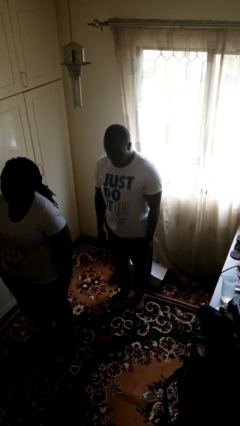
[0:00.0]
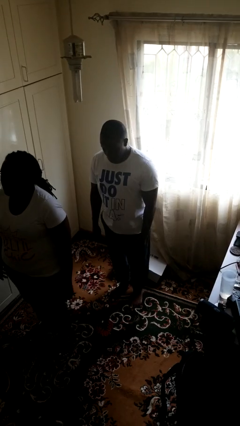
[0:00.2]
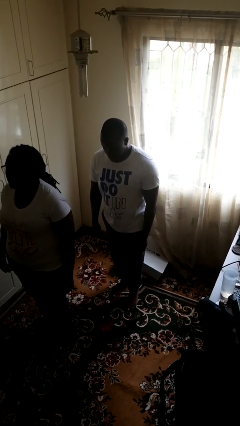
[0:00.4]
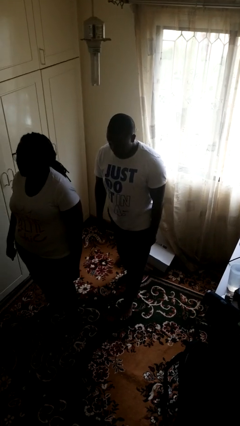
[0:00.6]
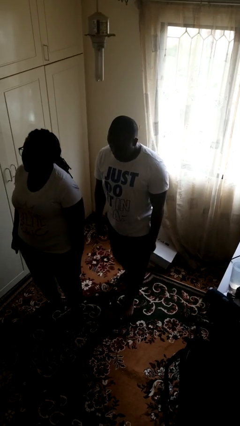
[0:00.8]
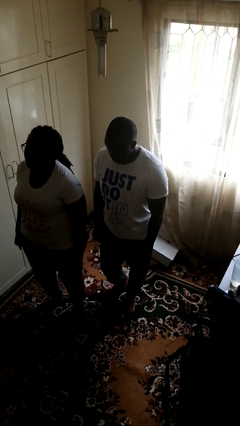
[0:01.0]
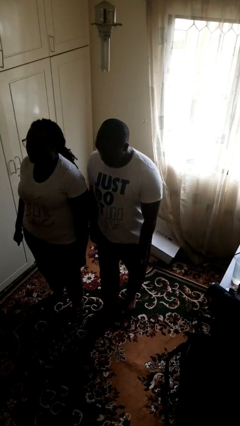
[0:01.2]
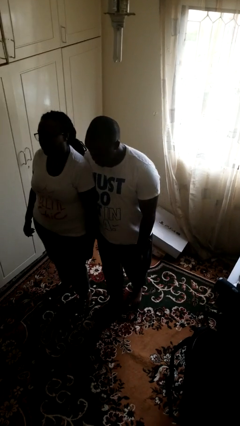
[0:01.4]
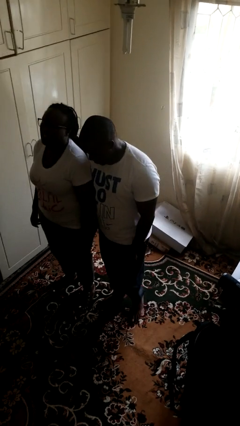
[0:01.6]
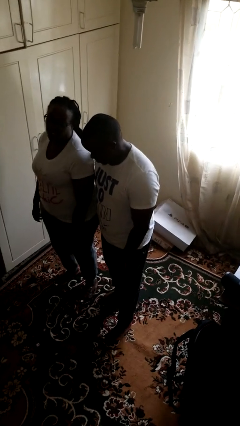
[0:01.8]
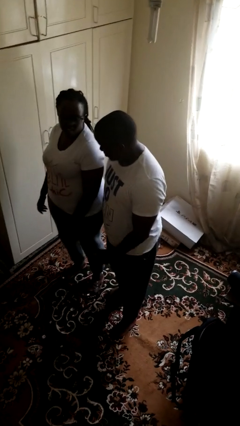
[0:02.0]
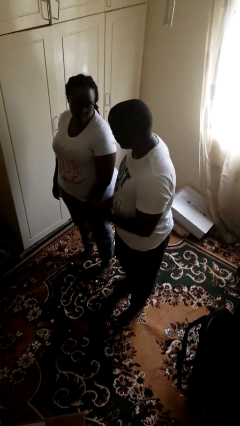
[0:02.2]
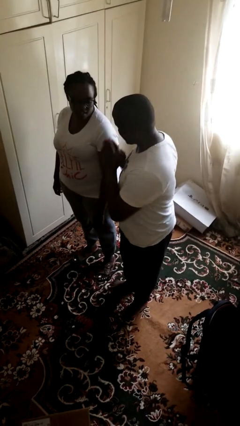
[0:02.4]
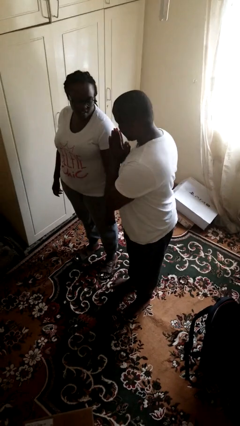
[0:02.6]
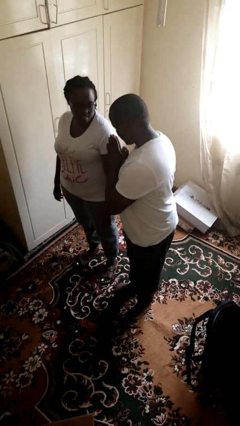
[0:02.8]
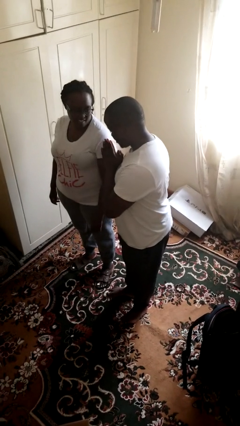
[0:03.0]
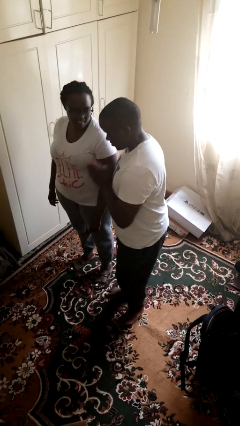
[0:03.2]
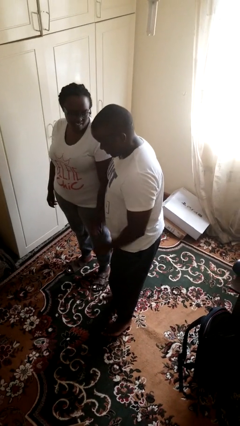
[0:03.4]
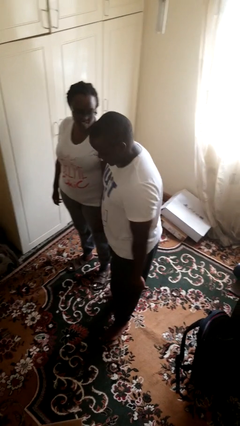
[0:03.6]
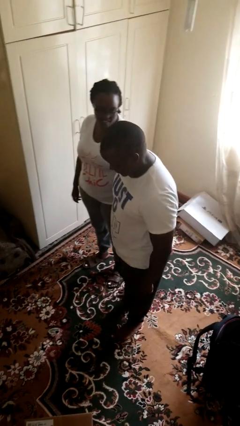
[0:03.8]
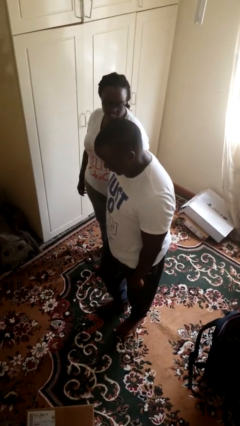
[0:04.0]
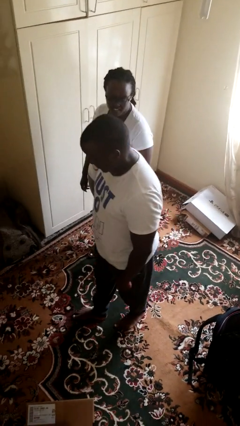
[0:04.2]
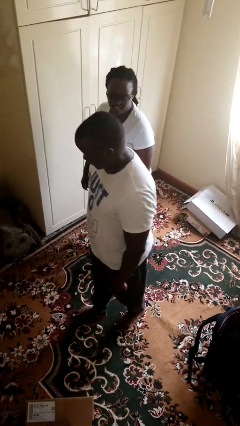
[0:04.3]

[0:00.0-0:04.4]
person bumps into person

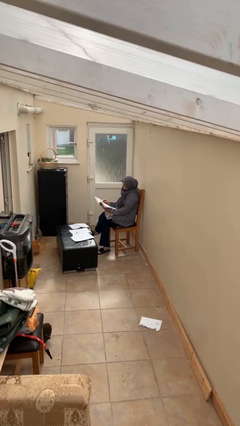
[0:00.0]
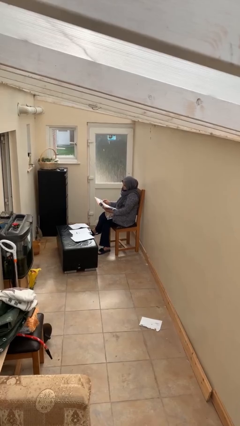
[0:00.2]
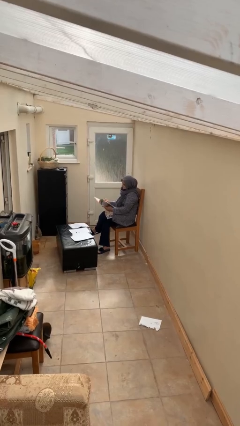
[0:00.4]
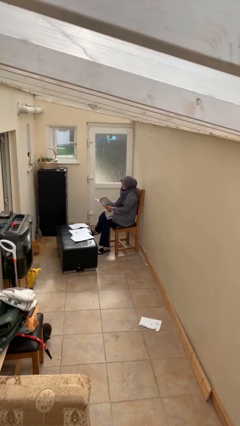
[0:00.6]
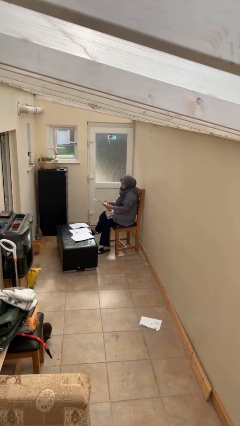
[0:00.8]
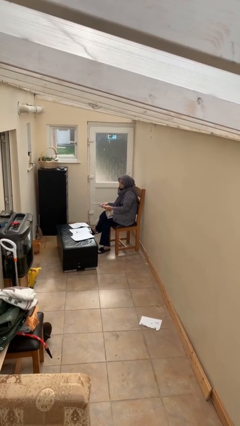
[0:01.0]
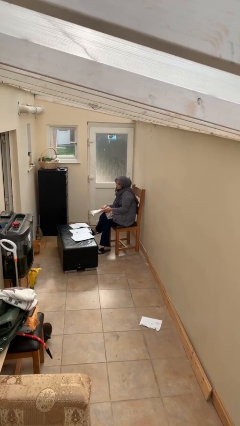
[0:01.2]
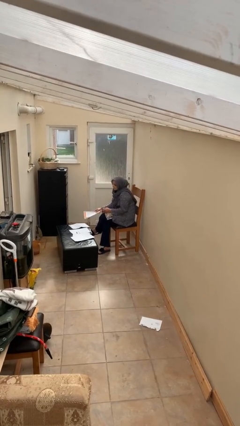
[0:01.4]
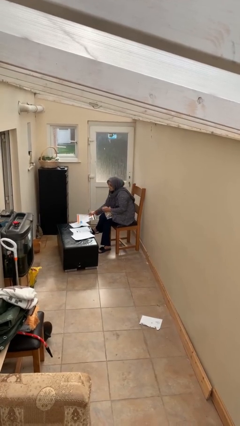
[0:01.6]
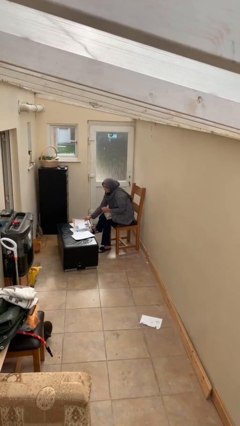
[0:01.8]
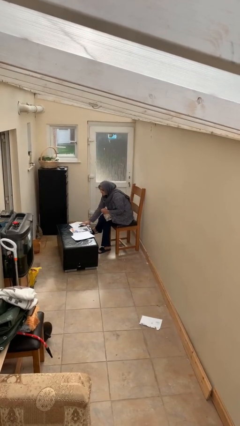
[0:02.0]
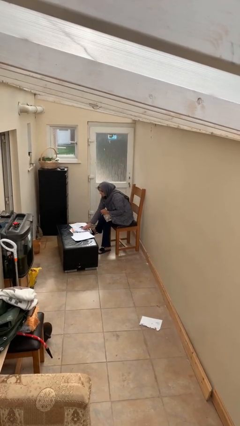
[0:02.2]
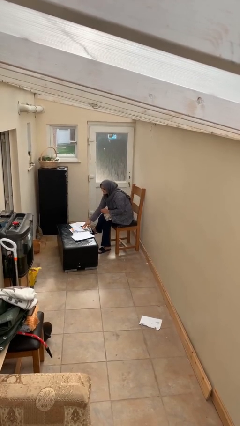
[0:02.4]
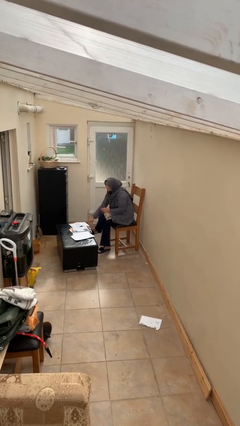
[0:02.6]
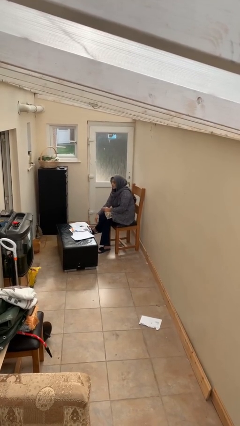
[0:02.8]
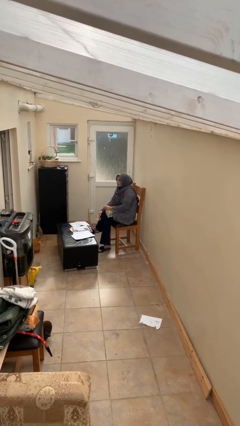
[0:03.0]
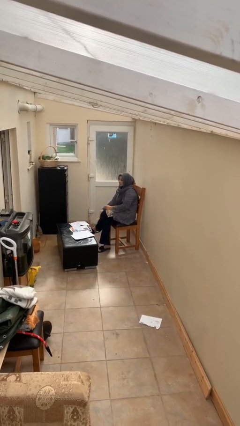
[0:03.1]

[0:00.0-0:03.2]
person puts down object on table

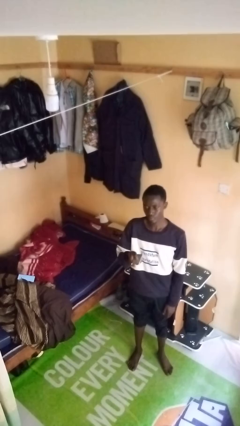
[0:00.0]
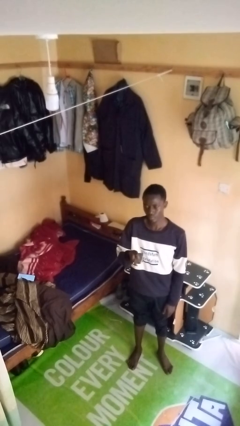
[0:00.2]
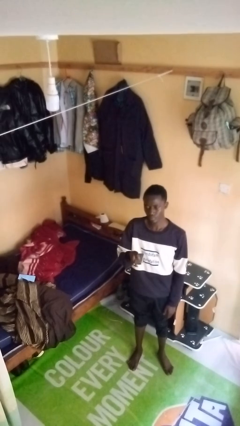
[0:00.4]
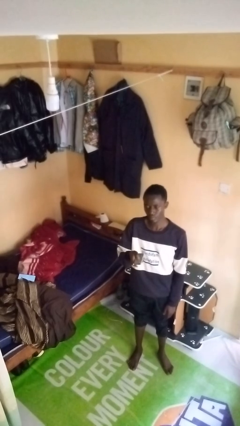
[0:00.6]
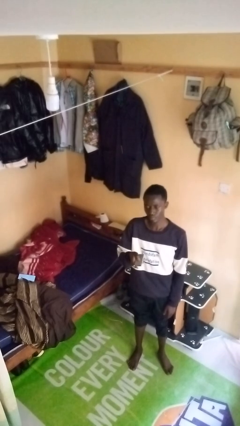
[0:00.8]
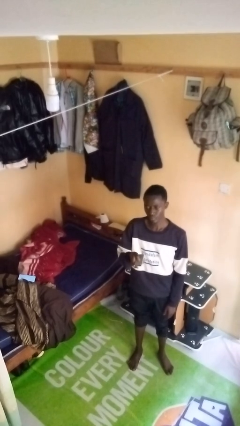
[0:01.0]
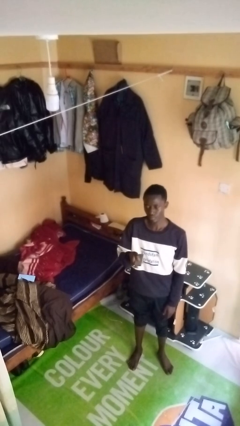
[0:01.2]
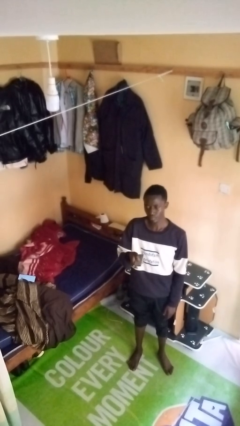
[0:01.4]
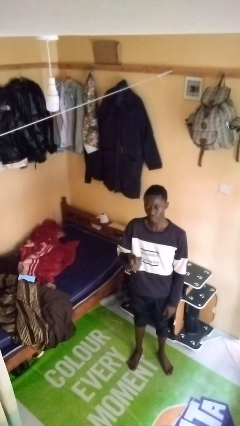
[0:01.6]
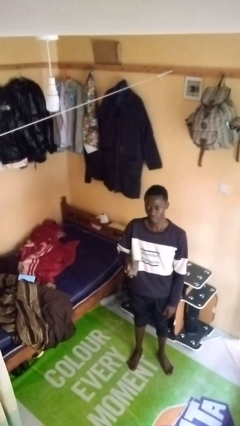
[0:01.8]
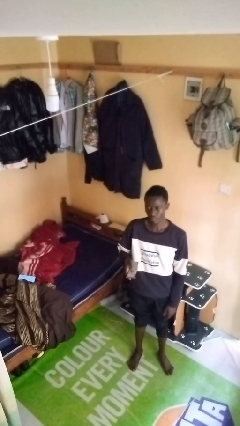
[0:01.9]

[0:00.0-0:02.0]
person uses television remote

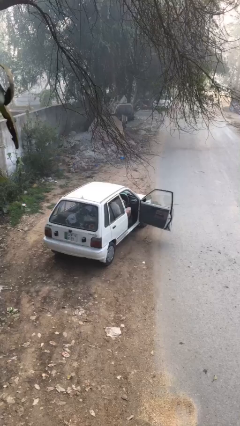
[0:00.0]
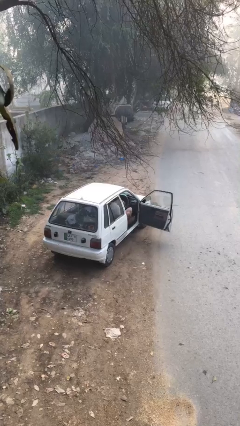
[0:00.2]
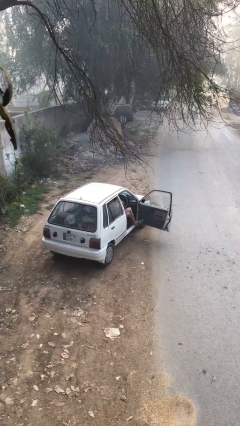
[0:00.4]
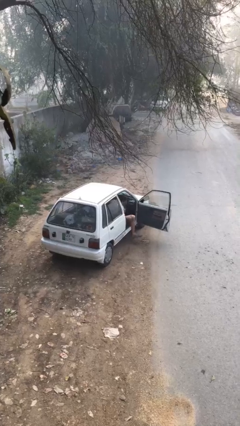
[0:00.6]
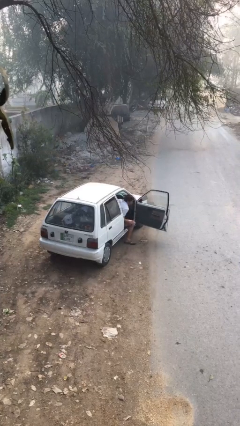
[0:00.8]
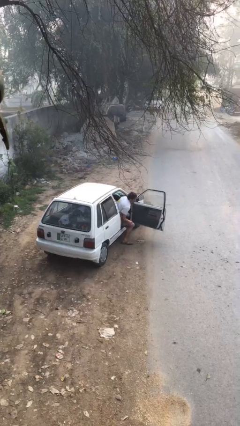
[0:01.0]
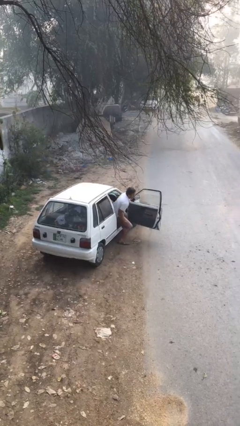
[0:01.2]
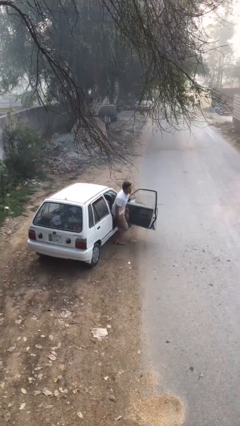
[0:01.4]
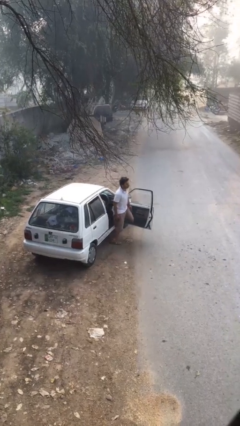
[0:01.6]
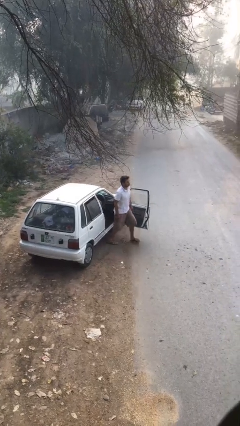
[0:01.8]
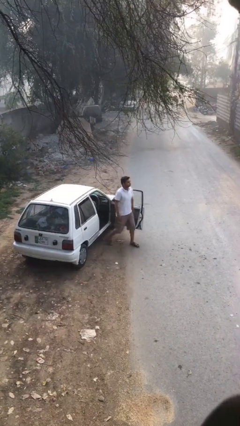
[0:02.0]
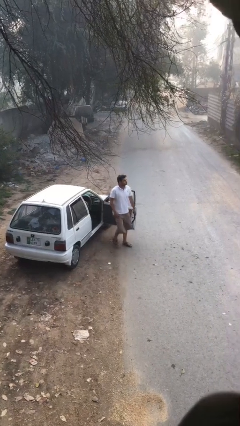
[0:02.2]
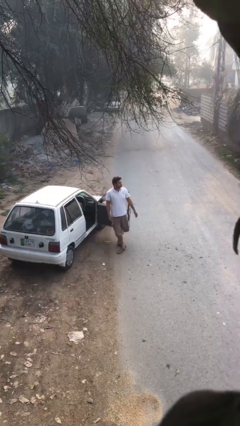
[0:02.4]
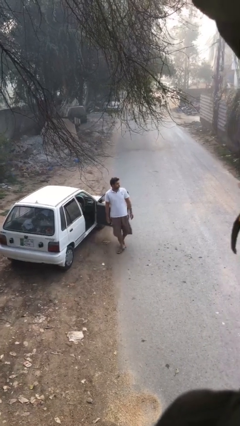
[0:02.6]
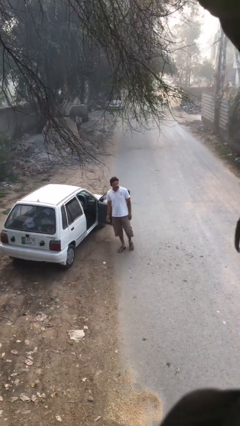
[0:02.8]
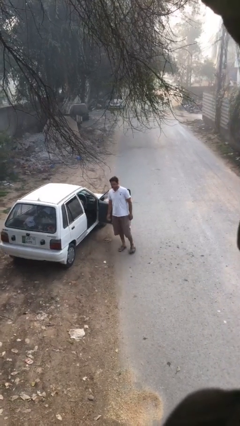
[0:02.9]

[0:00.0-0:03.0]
person exits car

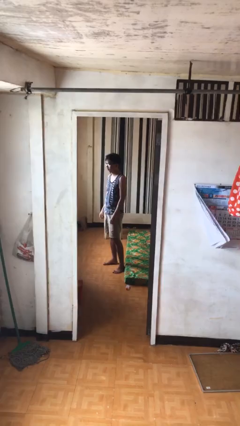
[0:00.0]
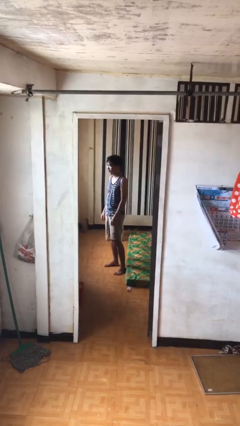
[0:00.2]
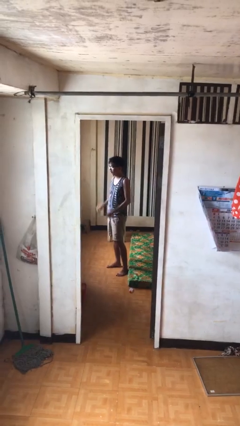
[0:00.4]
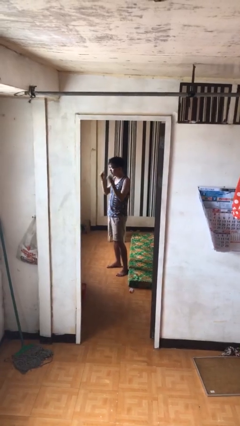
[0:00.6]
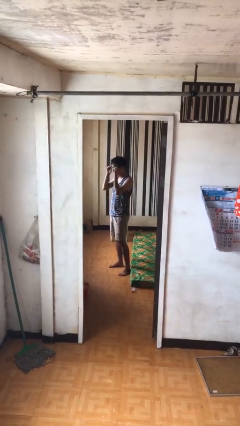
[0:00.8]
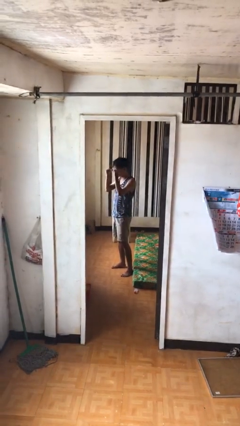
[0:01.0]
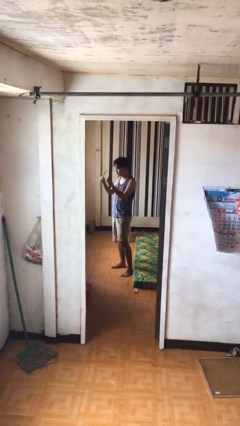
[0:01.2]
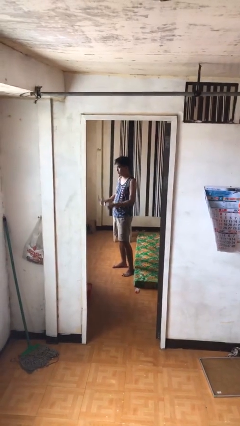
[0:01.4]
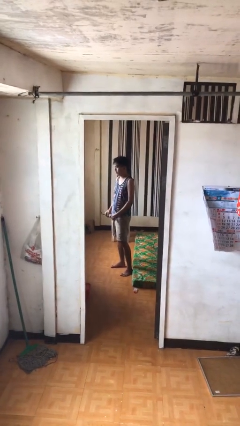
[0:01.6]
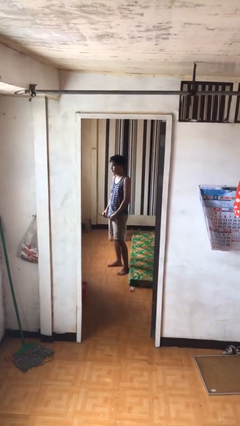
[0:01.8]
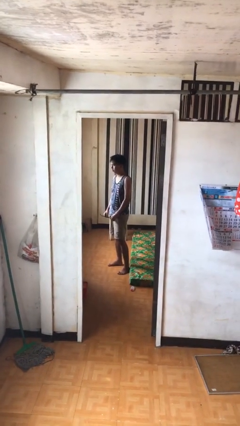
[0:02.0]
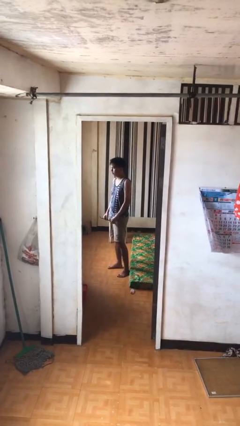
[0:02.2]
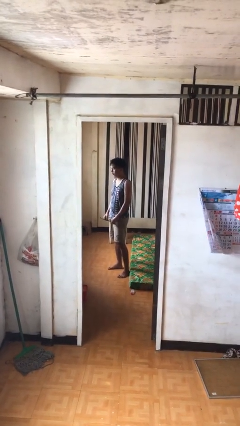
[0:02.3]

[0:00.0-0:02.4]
person takes off glasses

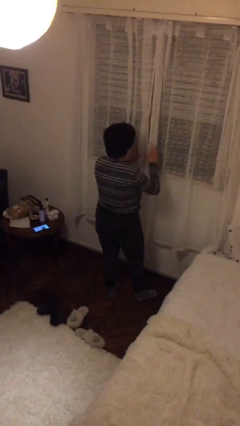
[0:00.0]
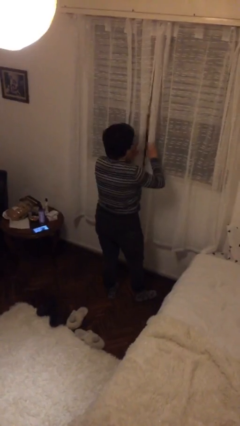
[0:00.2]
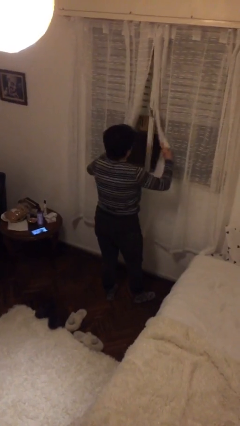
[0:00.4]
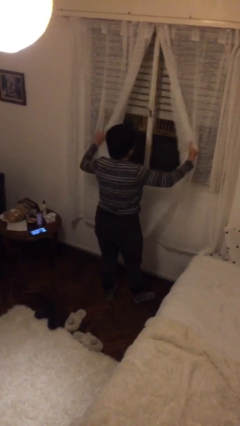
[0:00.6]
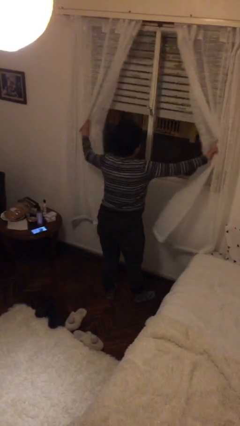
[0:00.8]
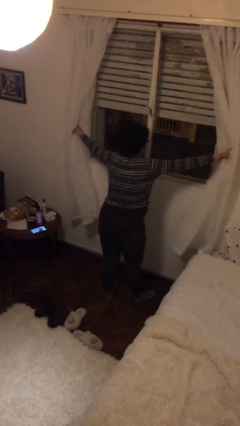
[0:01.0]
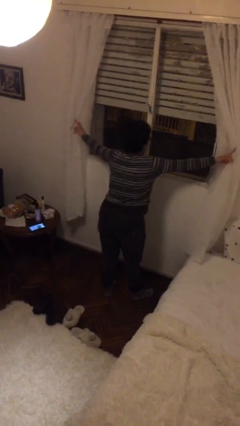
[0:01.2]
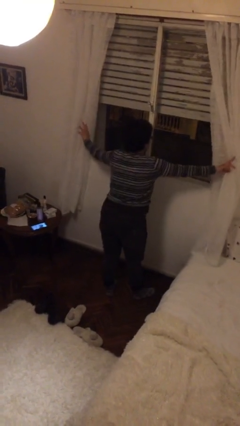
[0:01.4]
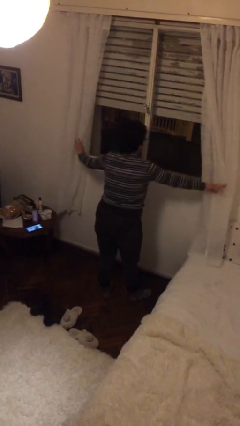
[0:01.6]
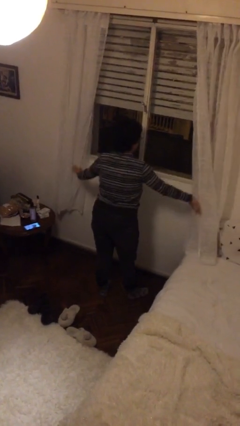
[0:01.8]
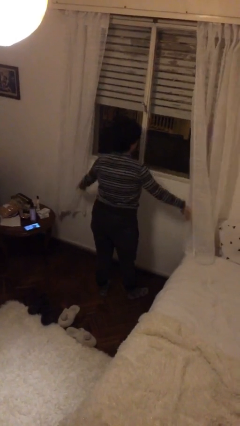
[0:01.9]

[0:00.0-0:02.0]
person opens curtains
